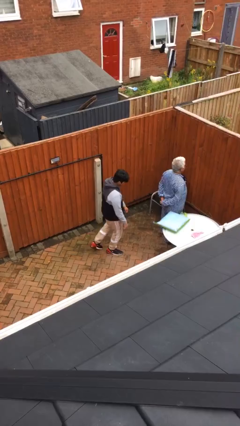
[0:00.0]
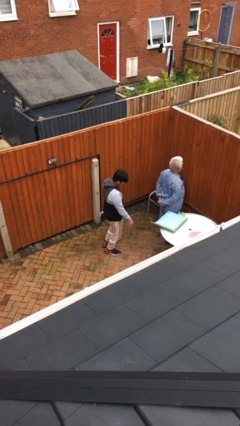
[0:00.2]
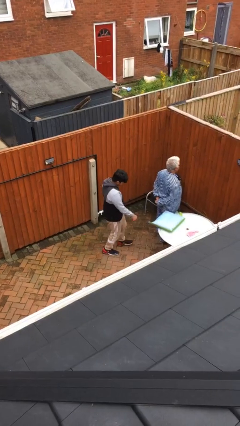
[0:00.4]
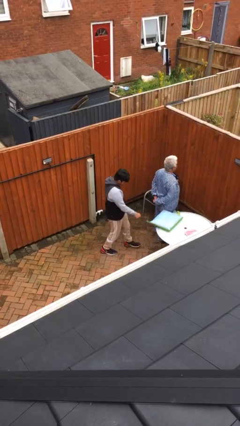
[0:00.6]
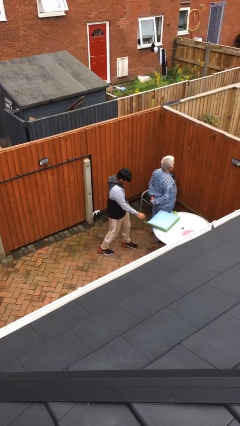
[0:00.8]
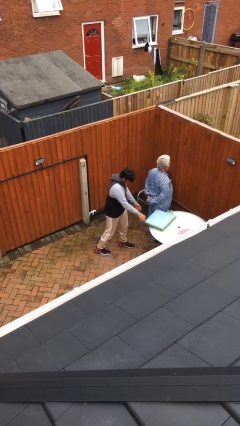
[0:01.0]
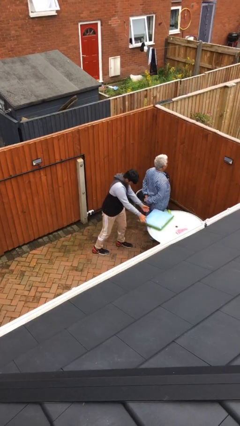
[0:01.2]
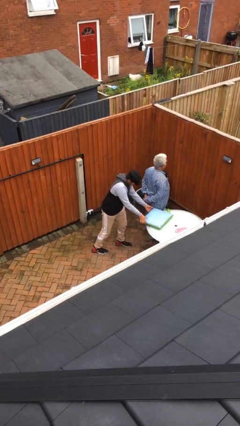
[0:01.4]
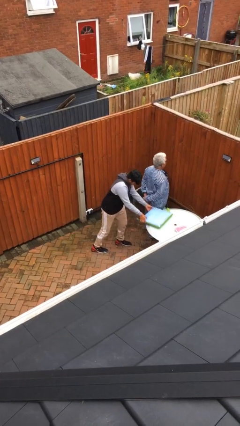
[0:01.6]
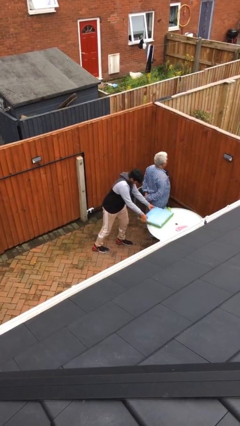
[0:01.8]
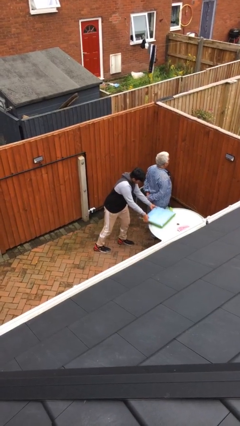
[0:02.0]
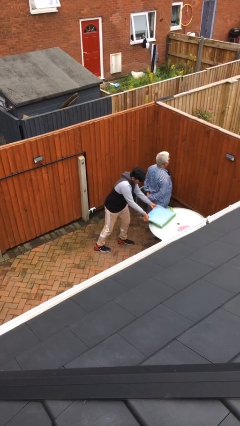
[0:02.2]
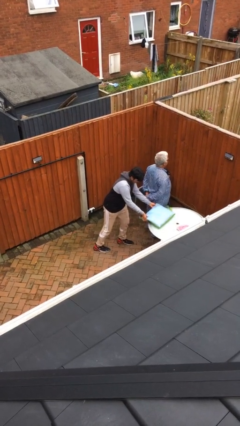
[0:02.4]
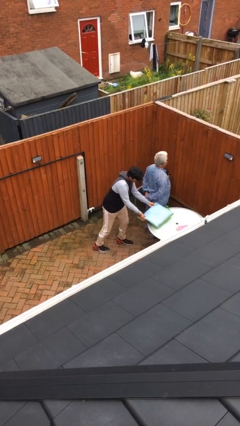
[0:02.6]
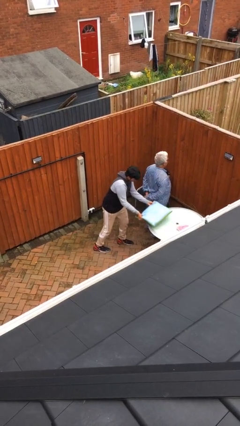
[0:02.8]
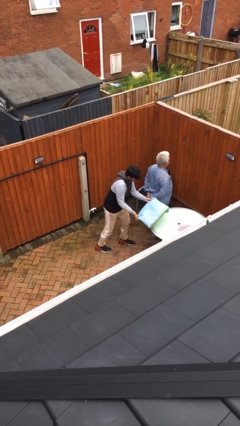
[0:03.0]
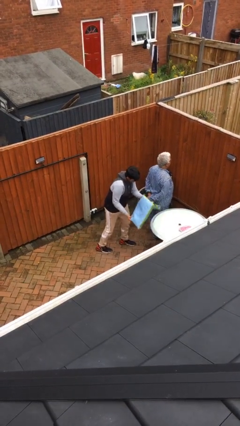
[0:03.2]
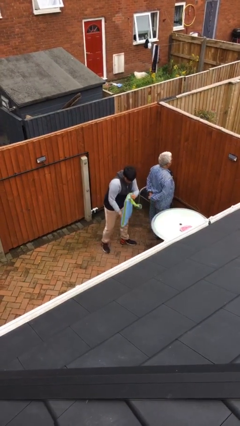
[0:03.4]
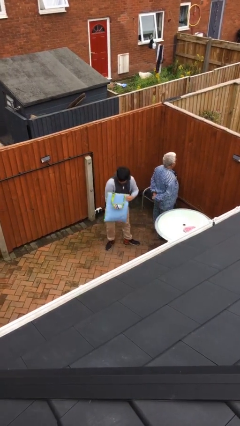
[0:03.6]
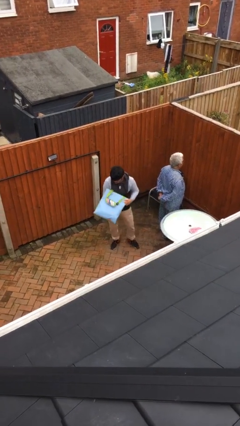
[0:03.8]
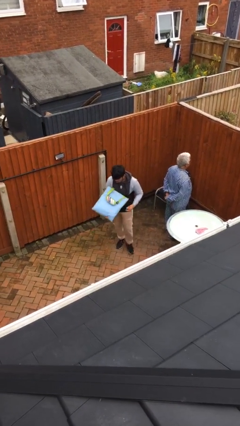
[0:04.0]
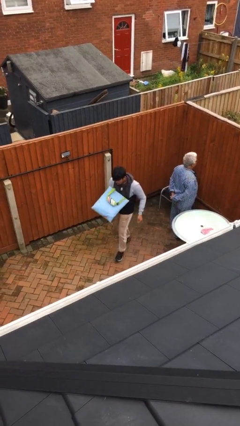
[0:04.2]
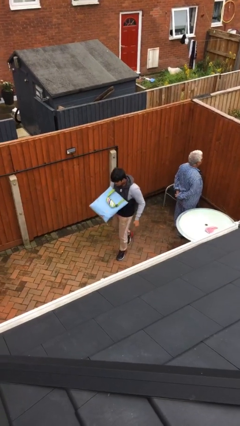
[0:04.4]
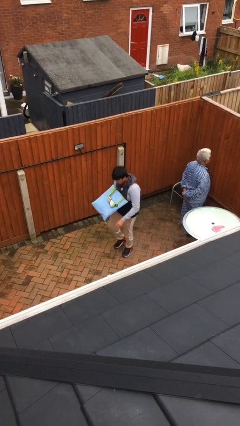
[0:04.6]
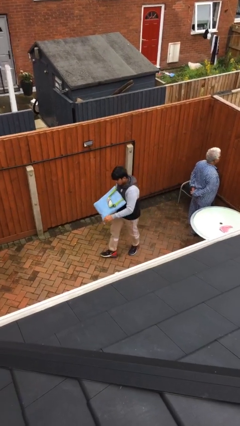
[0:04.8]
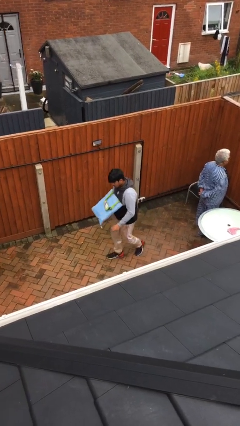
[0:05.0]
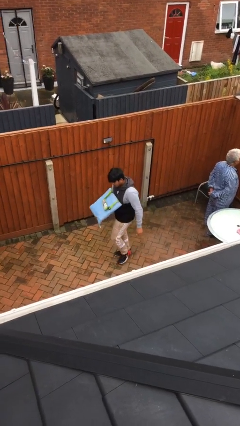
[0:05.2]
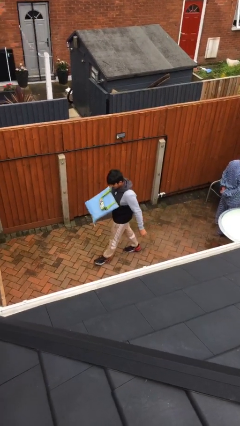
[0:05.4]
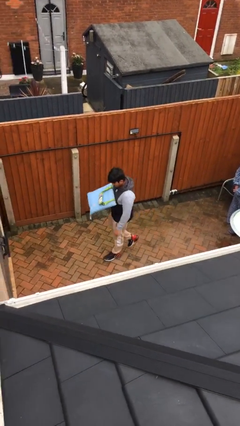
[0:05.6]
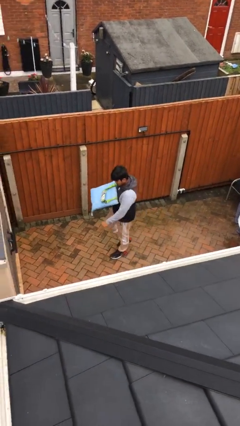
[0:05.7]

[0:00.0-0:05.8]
person steals object from person

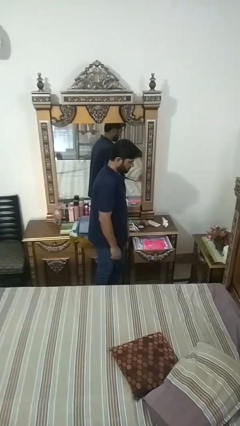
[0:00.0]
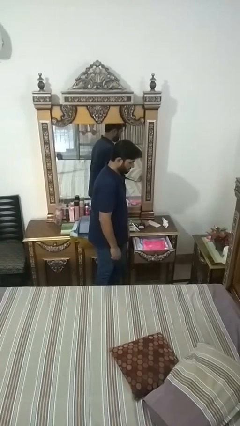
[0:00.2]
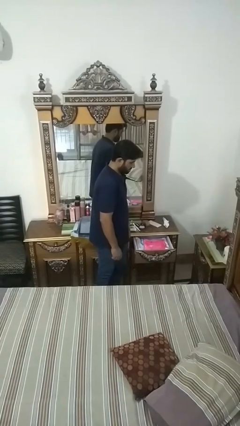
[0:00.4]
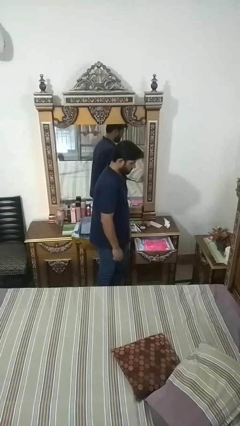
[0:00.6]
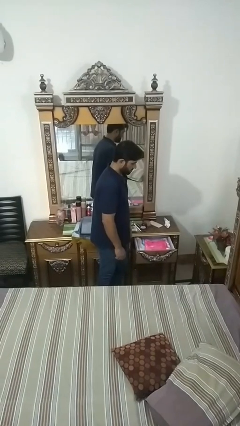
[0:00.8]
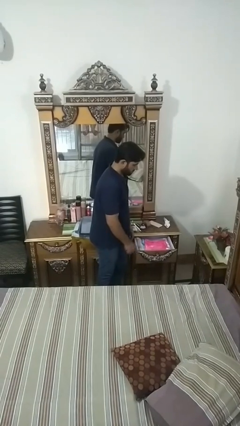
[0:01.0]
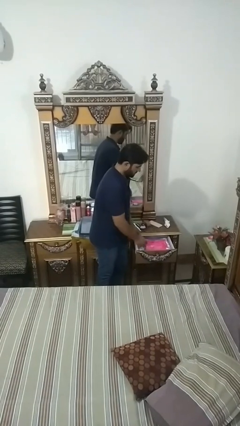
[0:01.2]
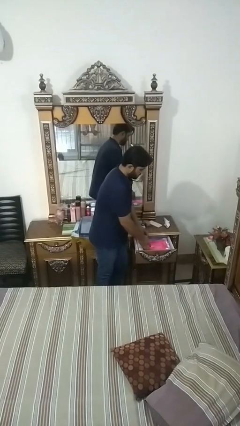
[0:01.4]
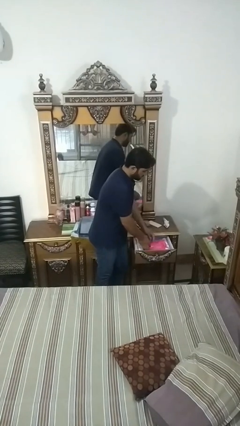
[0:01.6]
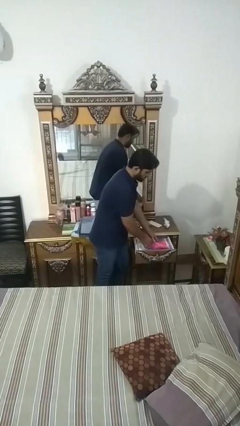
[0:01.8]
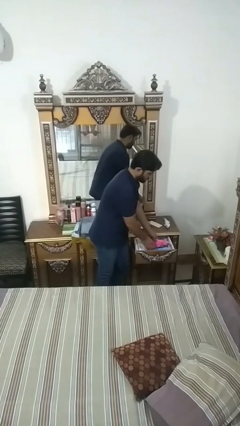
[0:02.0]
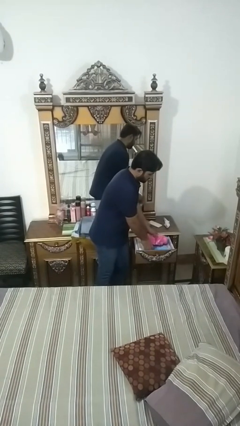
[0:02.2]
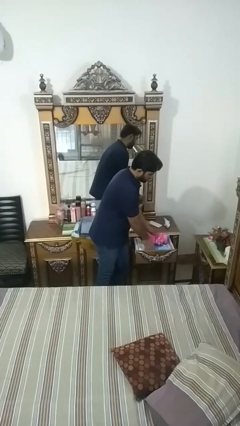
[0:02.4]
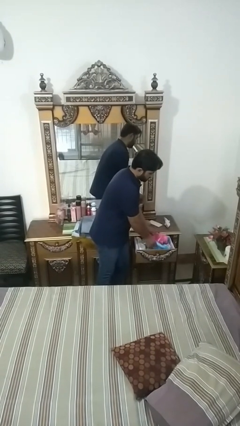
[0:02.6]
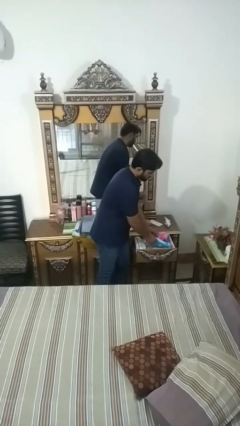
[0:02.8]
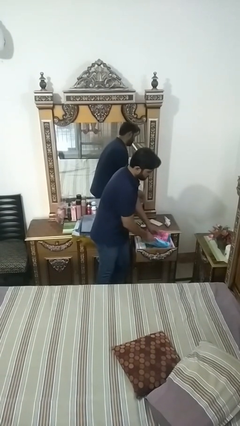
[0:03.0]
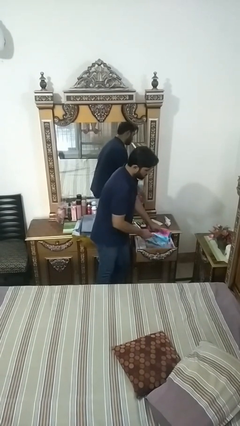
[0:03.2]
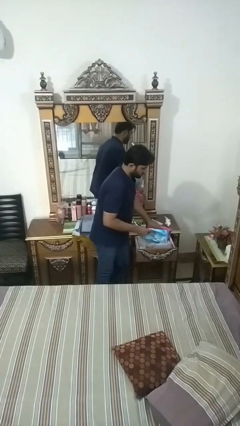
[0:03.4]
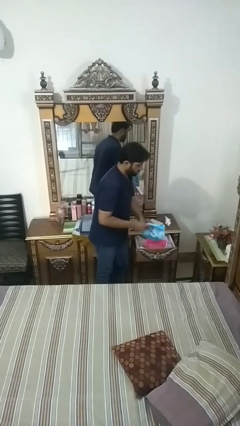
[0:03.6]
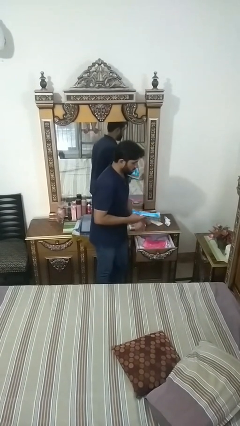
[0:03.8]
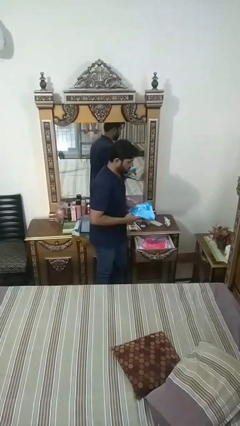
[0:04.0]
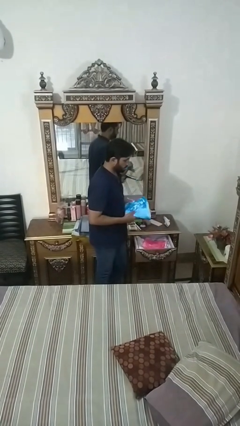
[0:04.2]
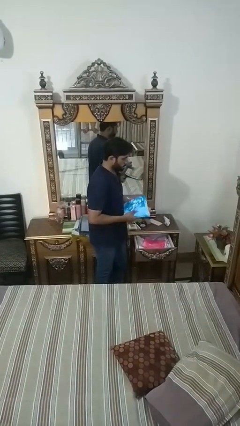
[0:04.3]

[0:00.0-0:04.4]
person takes clothes from dresser

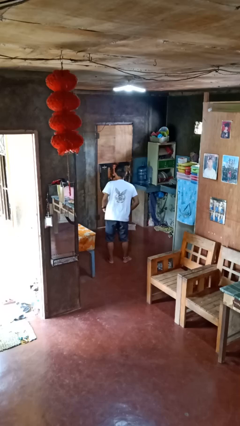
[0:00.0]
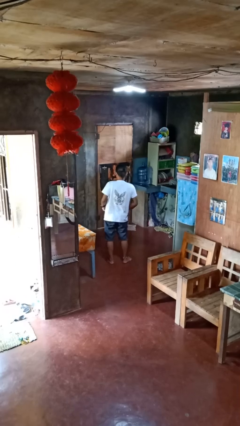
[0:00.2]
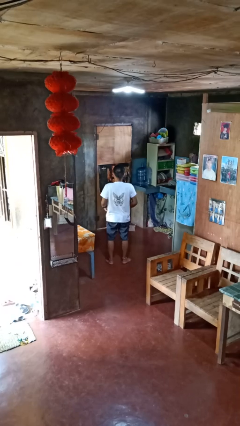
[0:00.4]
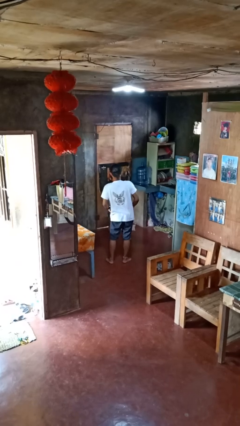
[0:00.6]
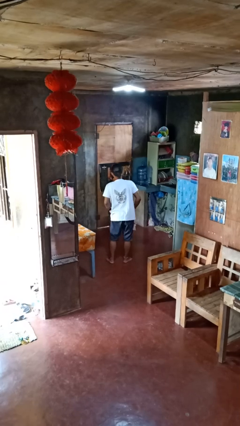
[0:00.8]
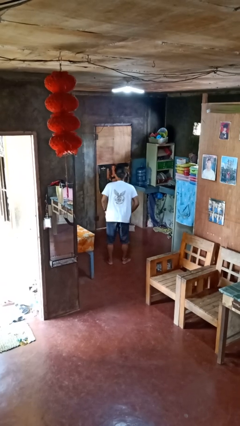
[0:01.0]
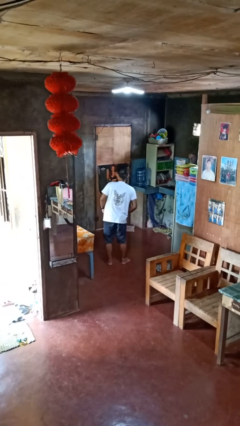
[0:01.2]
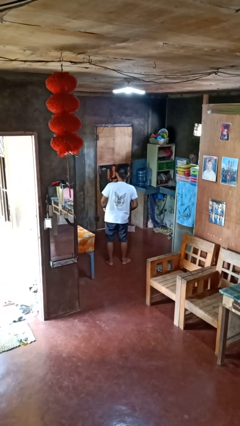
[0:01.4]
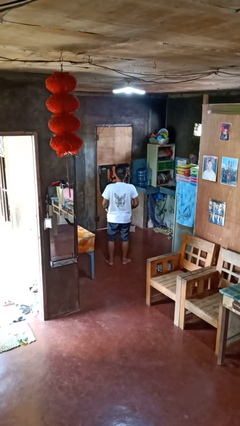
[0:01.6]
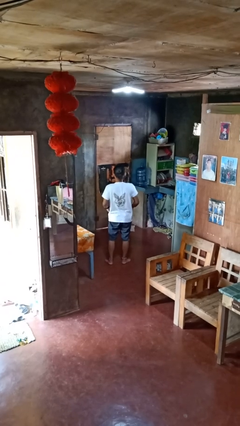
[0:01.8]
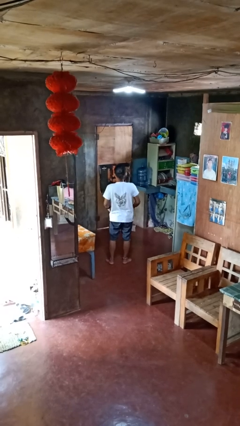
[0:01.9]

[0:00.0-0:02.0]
person wiggles hips

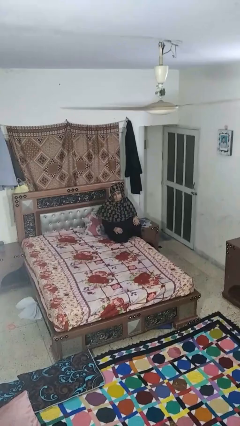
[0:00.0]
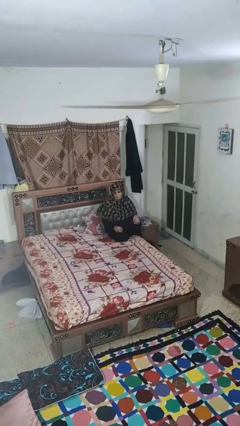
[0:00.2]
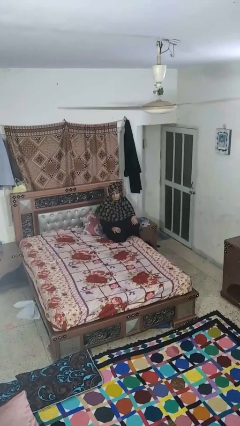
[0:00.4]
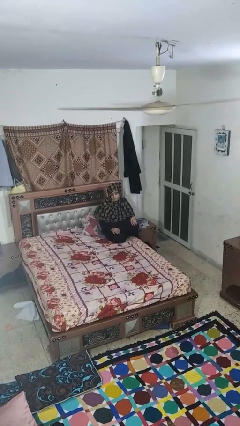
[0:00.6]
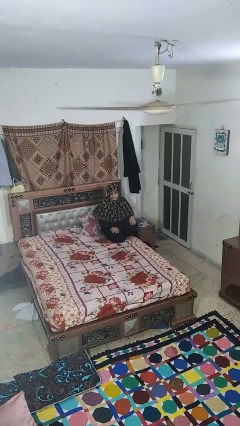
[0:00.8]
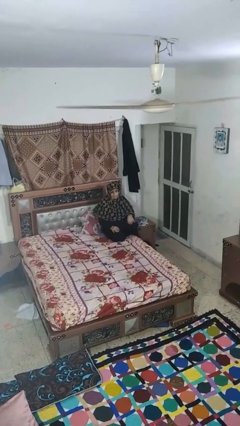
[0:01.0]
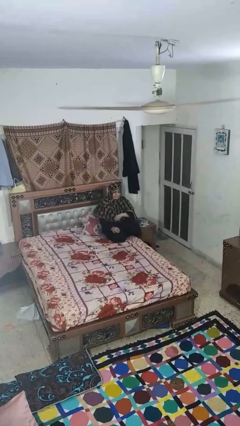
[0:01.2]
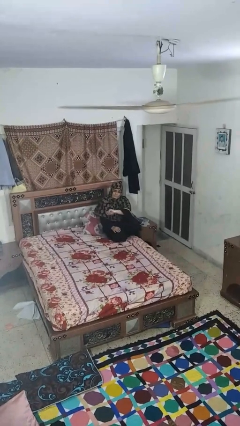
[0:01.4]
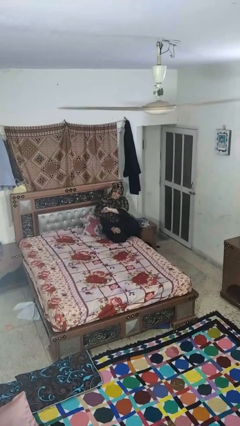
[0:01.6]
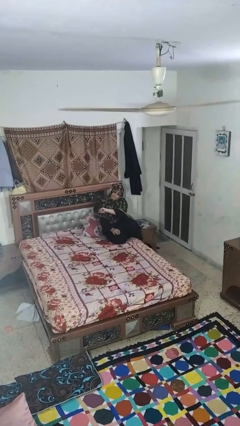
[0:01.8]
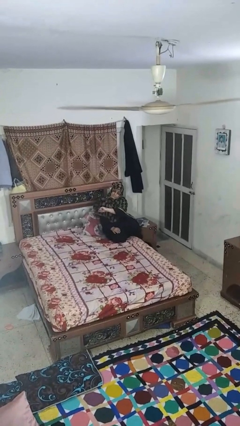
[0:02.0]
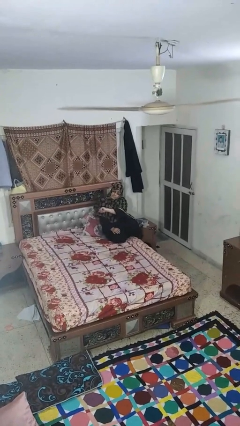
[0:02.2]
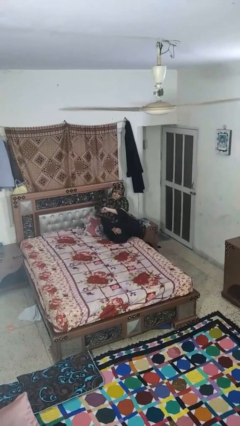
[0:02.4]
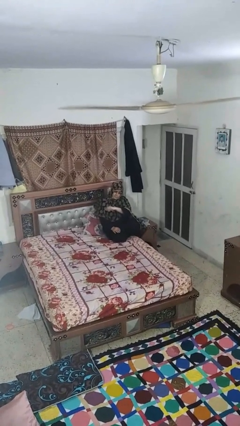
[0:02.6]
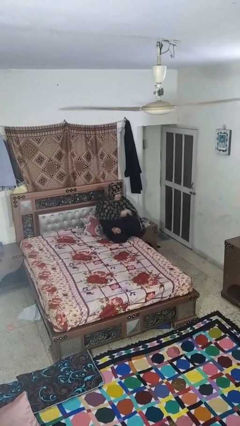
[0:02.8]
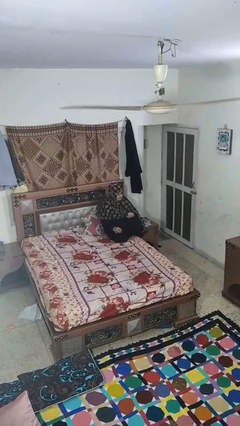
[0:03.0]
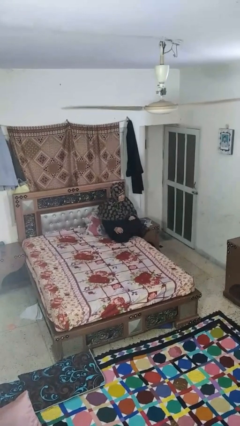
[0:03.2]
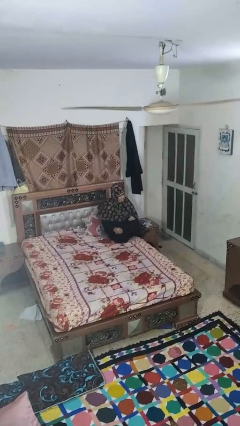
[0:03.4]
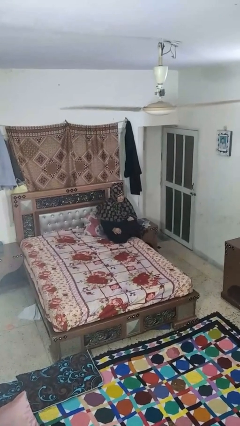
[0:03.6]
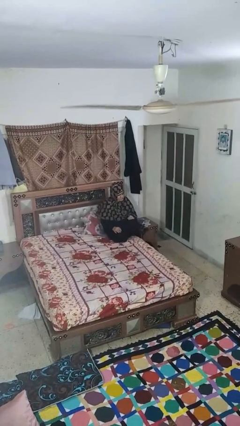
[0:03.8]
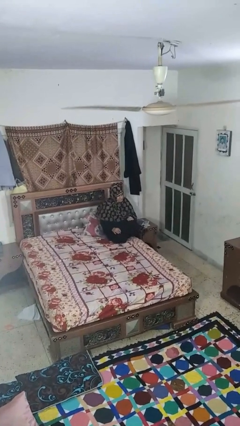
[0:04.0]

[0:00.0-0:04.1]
person looks at wristwatch

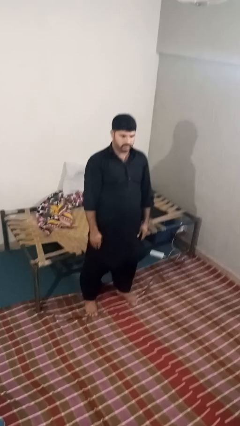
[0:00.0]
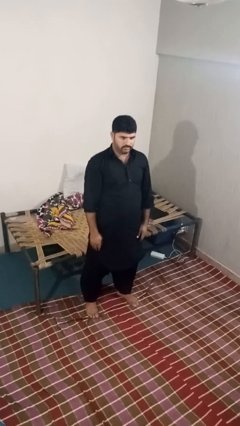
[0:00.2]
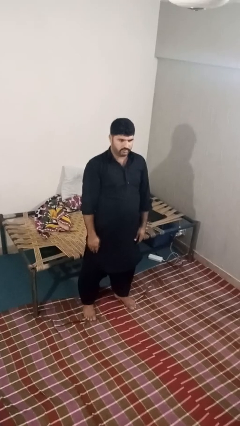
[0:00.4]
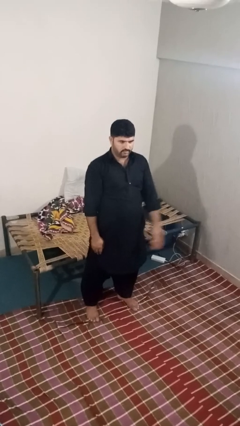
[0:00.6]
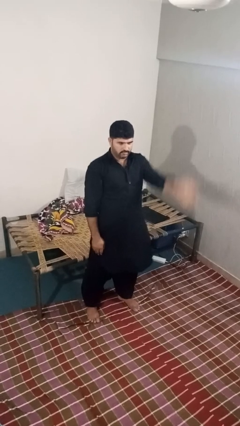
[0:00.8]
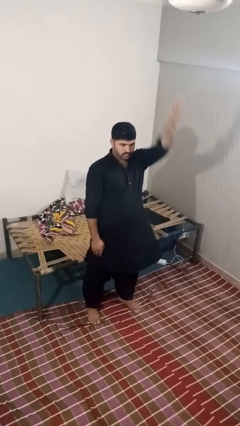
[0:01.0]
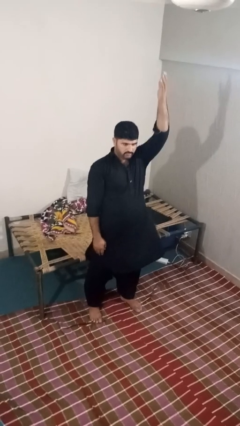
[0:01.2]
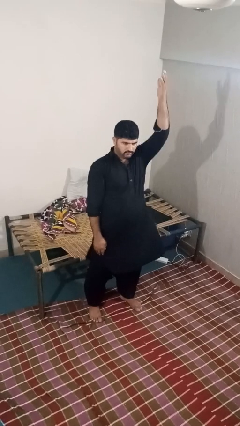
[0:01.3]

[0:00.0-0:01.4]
person gestures swipe up
